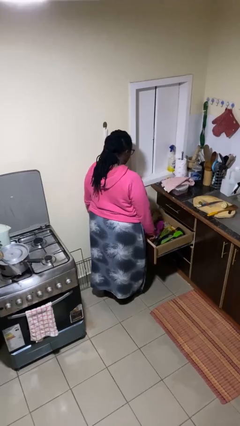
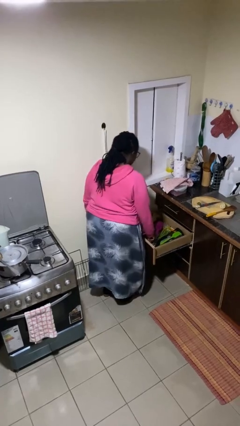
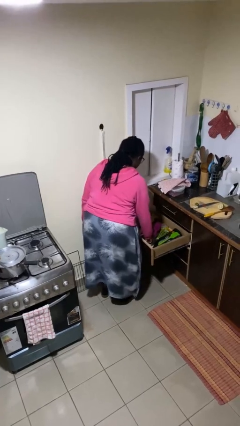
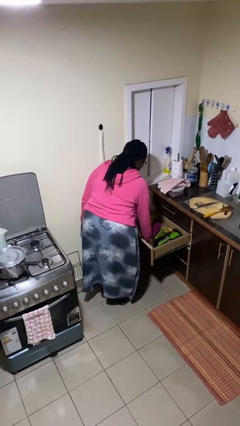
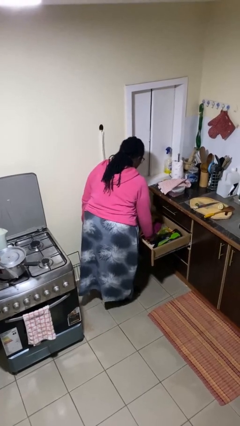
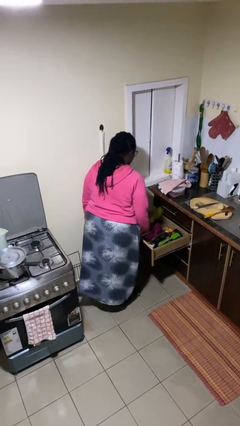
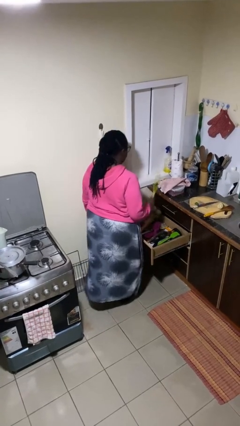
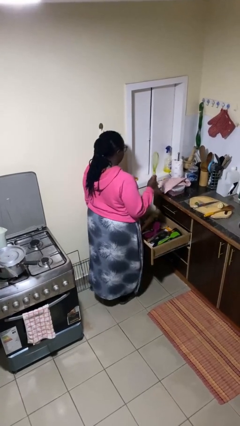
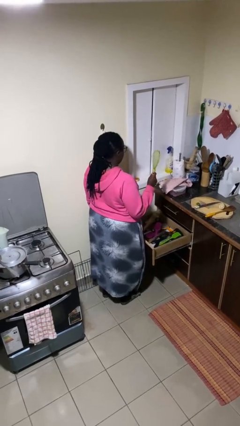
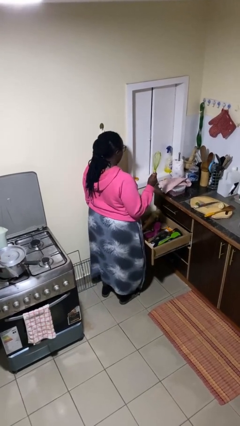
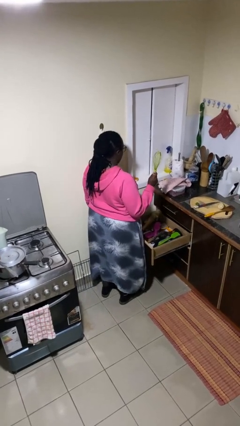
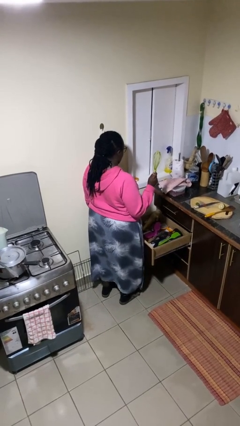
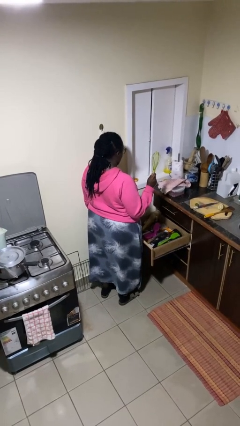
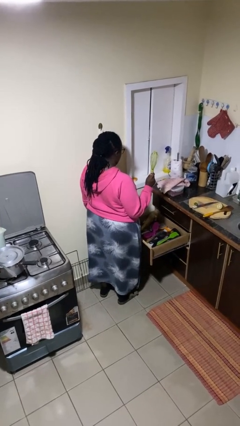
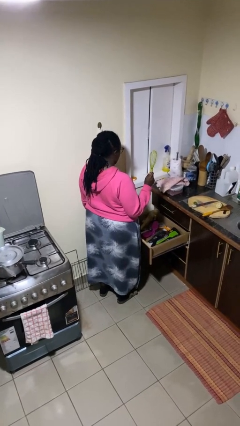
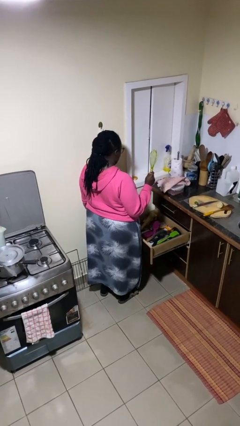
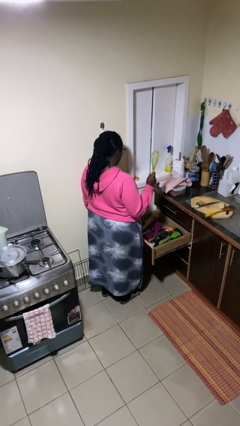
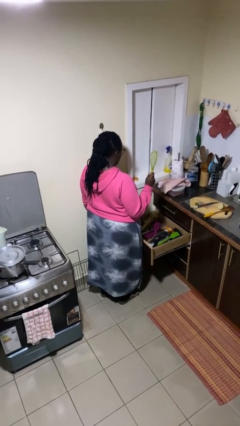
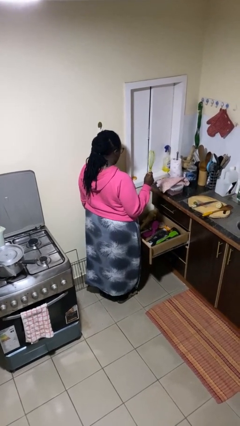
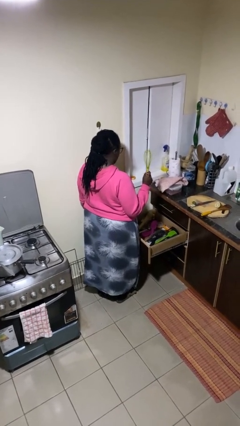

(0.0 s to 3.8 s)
person takes object from kitchen drawer

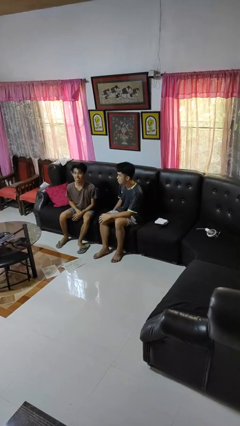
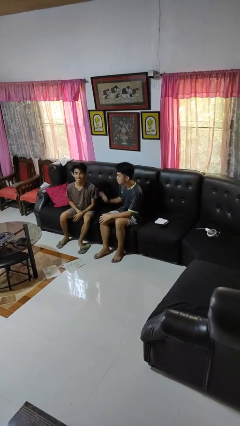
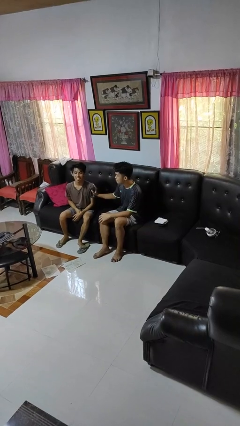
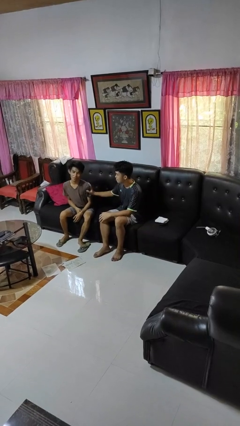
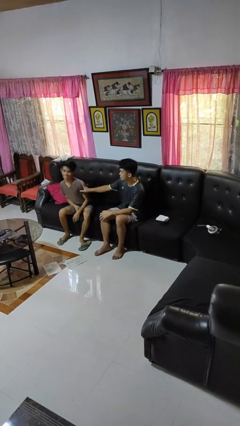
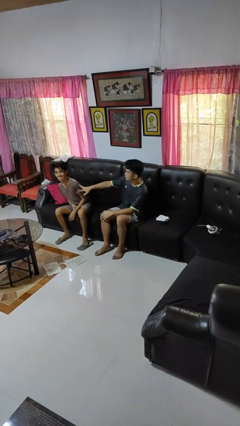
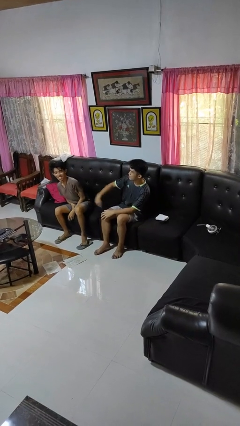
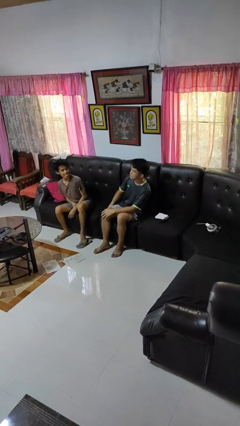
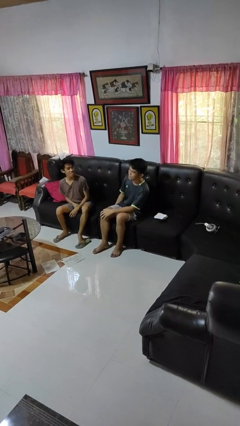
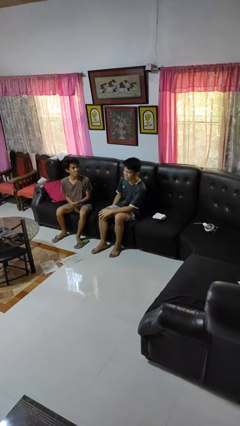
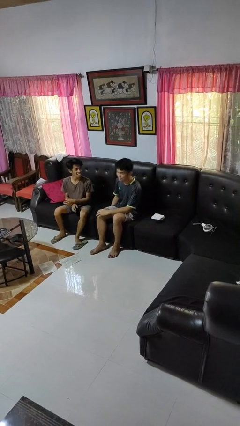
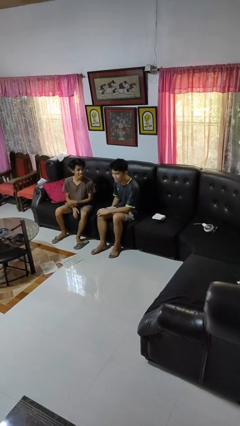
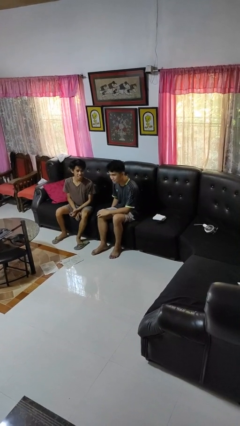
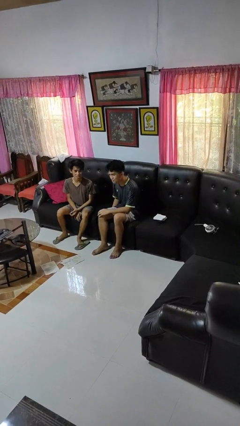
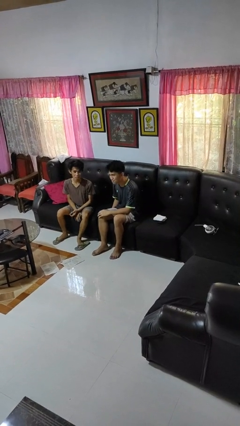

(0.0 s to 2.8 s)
person shoves person

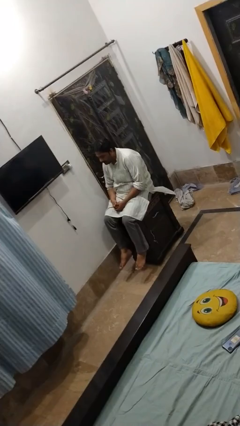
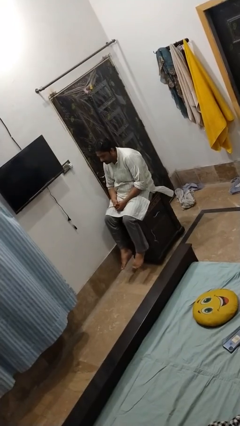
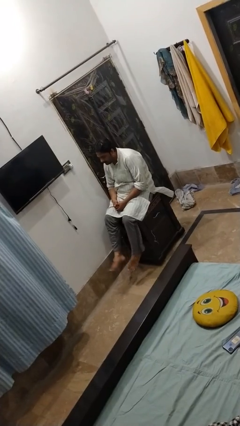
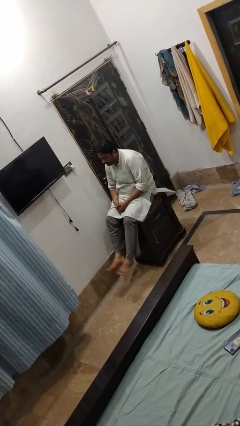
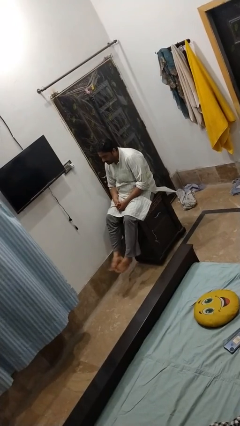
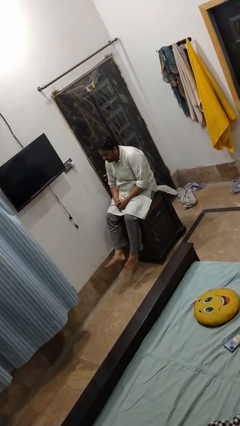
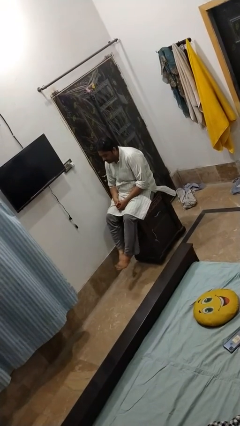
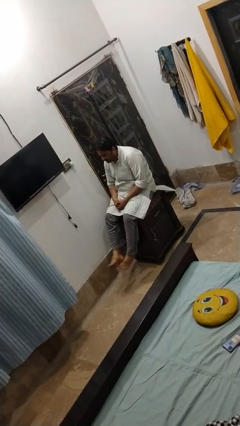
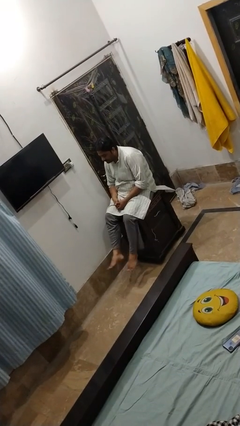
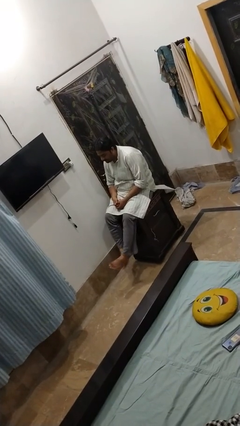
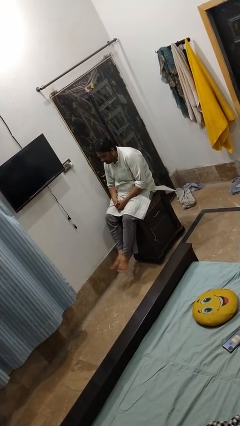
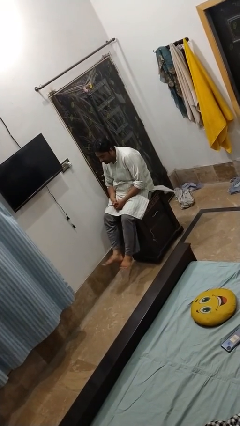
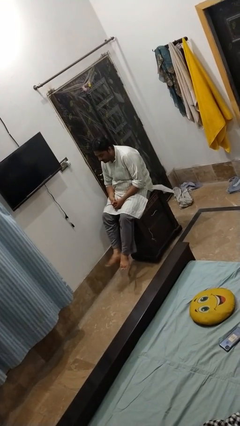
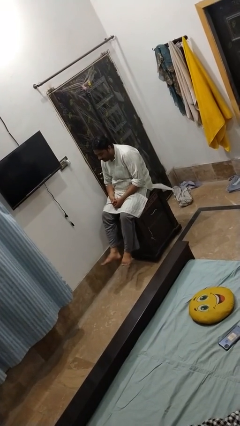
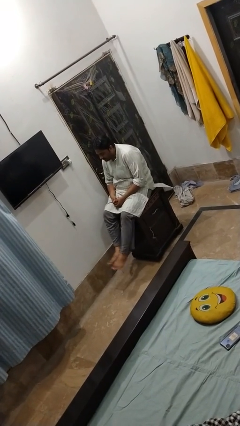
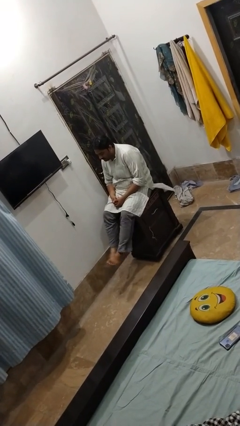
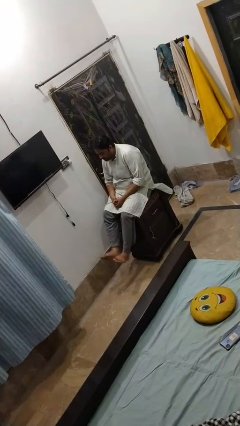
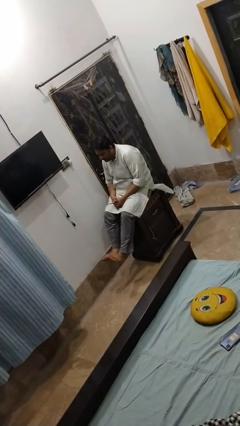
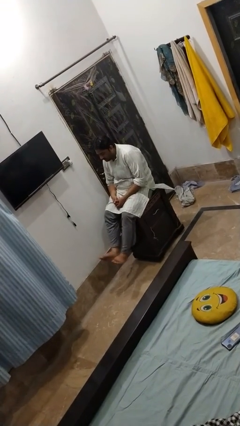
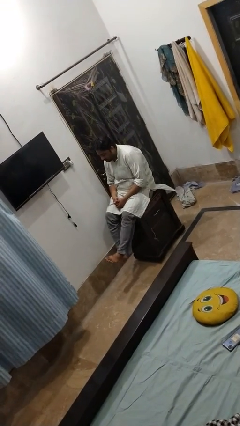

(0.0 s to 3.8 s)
person twirls

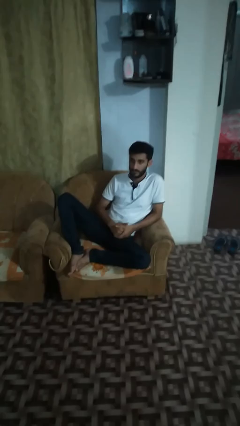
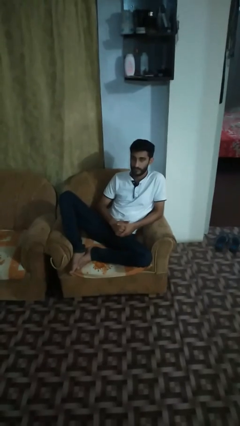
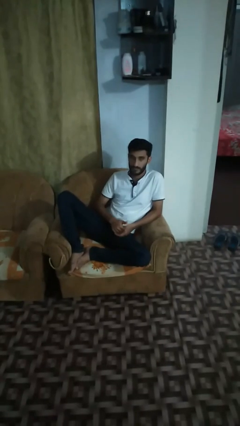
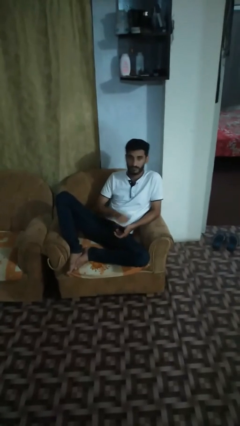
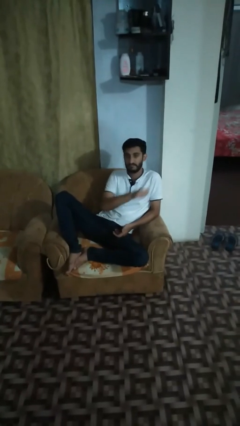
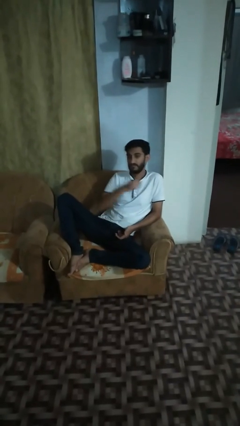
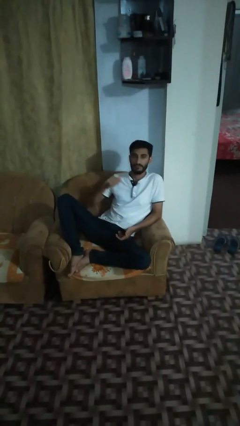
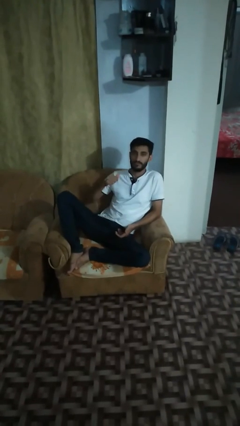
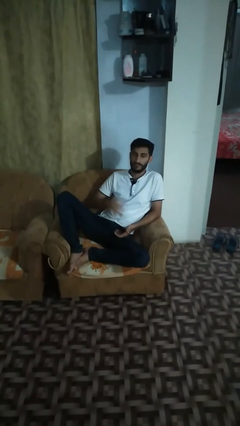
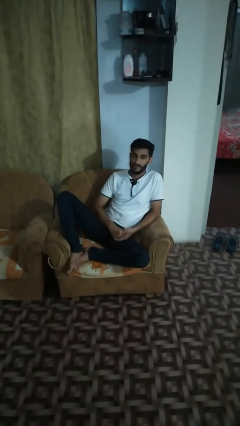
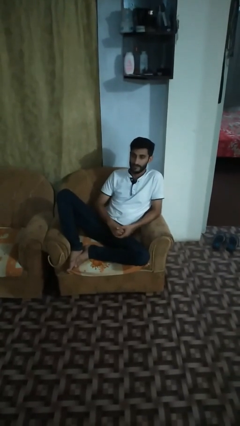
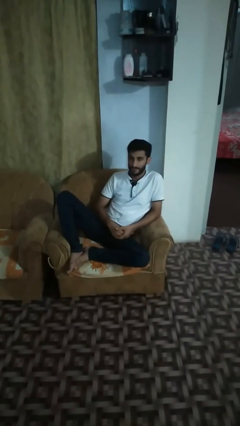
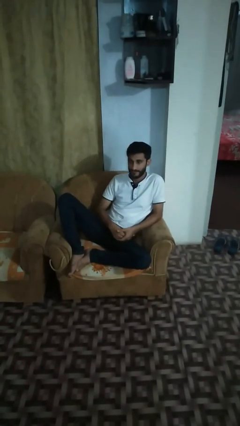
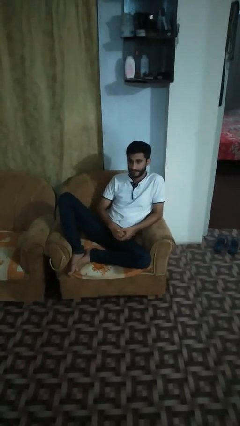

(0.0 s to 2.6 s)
person gestures cut

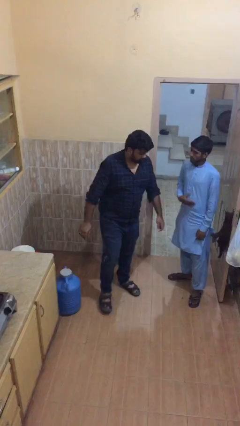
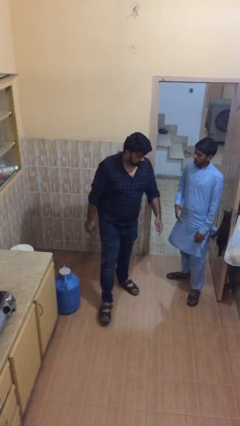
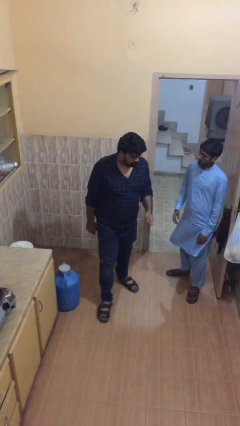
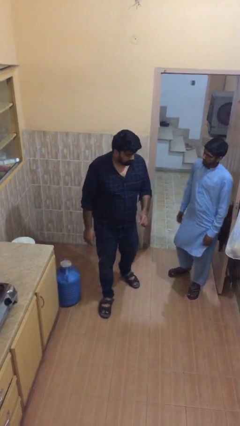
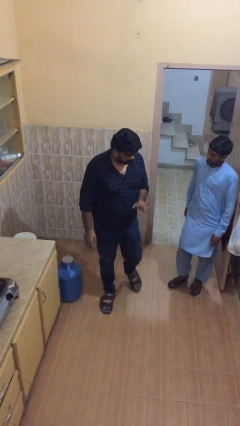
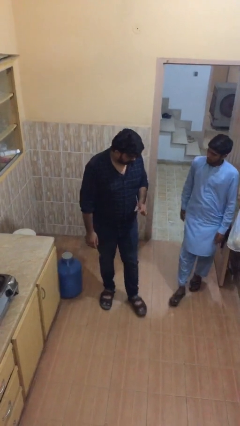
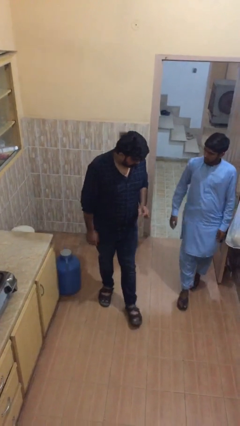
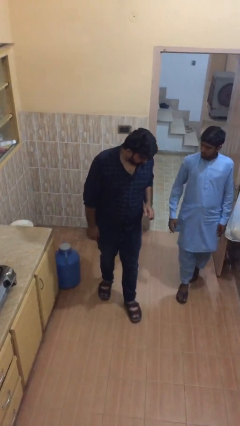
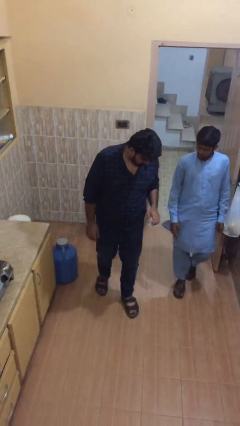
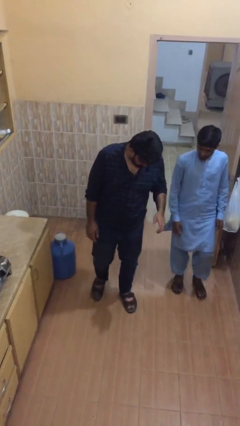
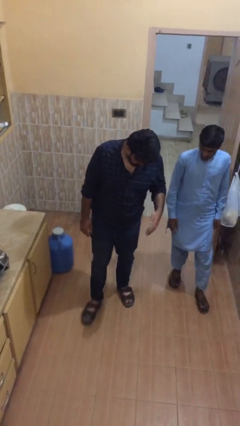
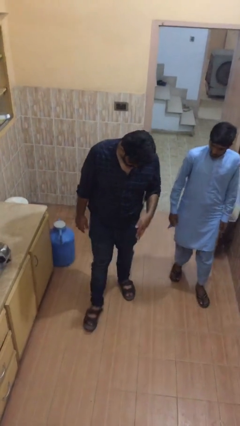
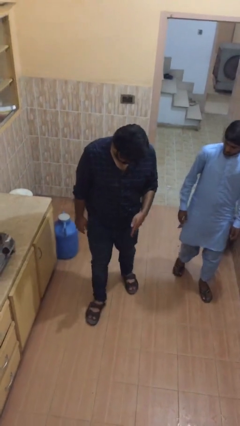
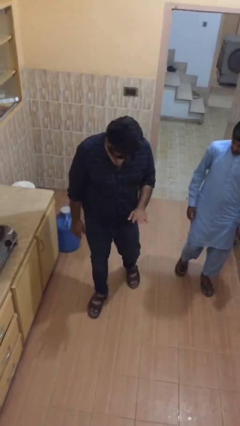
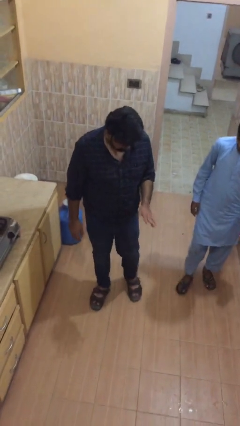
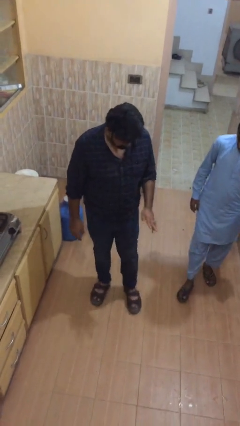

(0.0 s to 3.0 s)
person talks to person

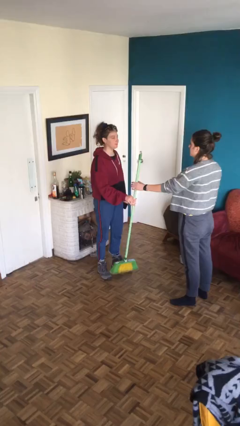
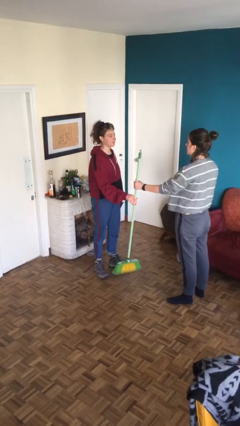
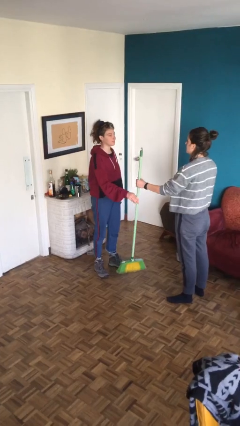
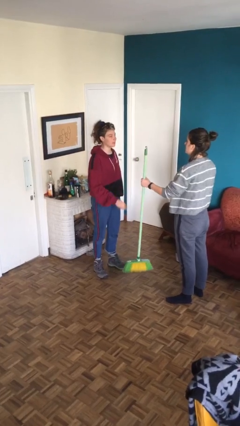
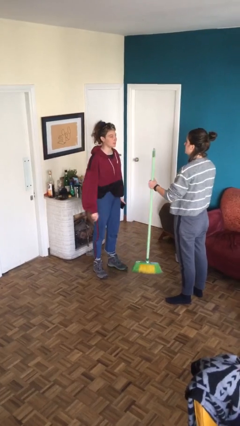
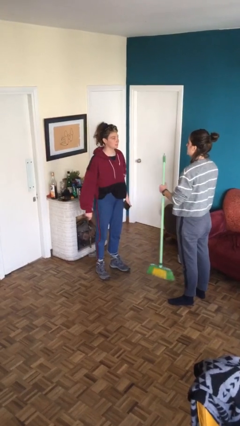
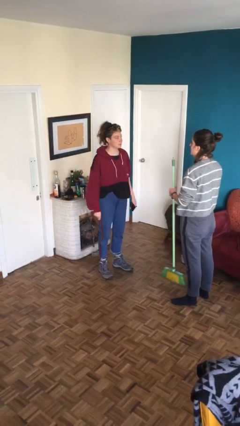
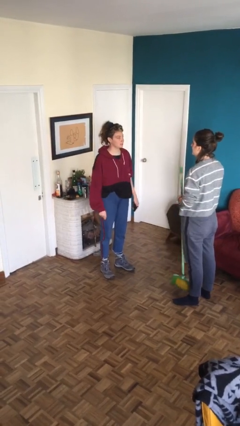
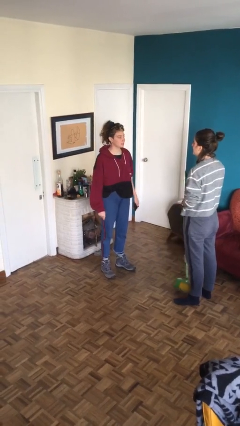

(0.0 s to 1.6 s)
person transfers object to person

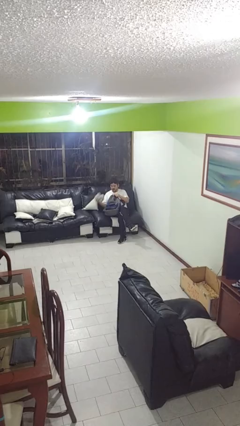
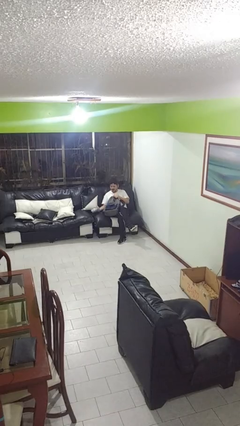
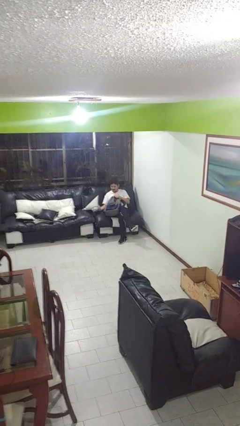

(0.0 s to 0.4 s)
person takes object from backpack
